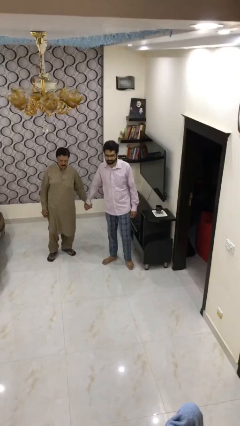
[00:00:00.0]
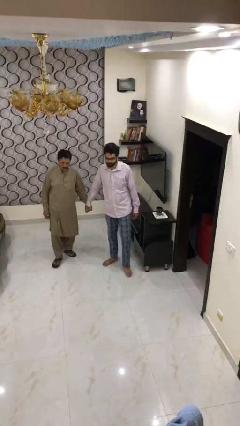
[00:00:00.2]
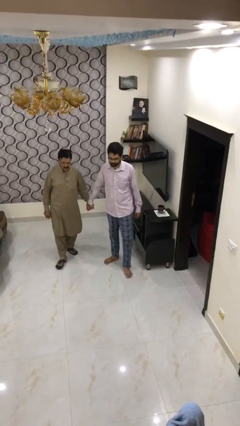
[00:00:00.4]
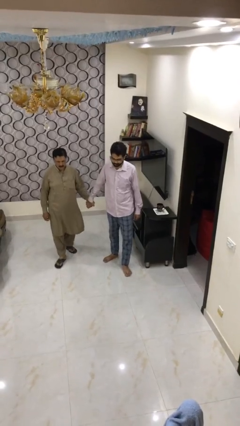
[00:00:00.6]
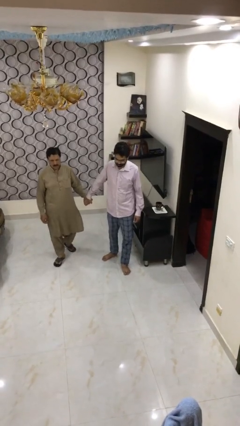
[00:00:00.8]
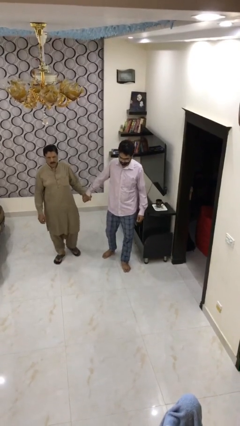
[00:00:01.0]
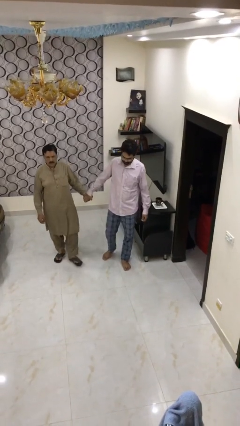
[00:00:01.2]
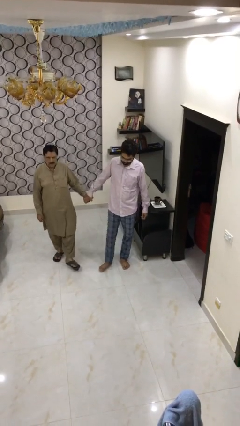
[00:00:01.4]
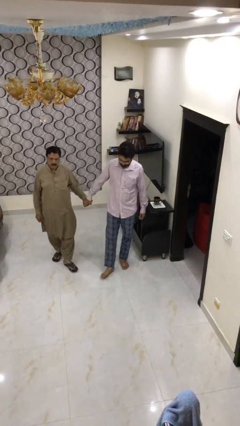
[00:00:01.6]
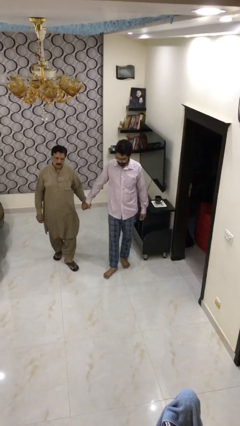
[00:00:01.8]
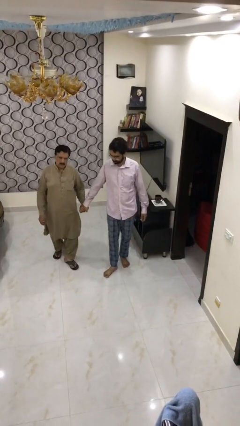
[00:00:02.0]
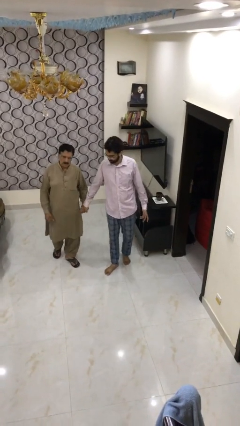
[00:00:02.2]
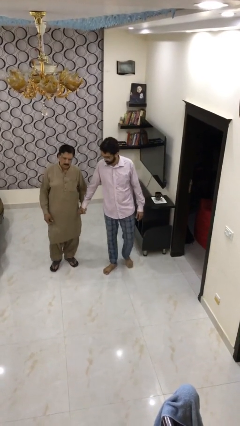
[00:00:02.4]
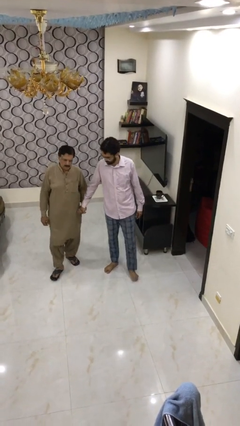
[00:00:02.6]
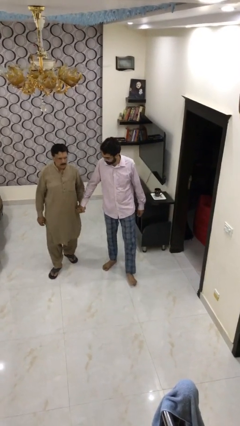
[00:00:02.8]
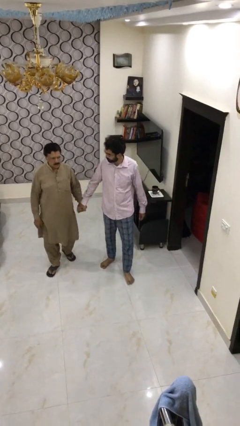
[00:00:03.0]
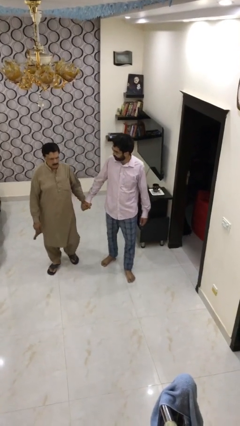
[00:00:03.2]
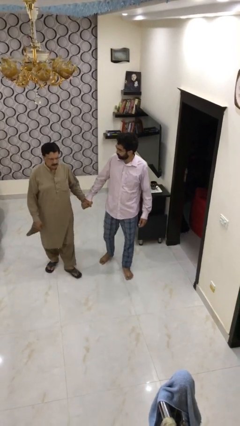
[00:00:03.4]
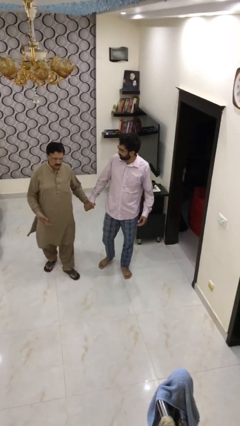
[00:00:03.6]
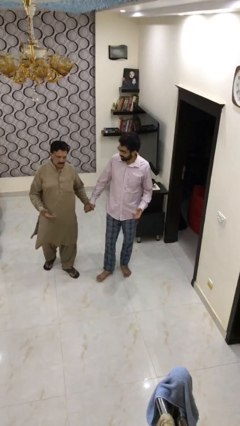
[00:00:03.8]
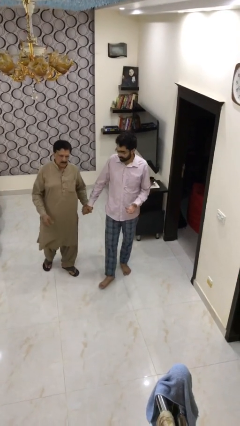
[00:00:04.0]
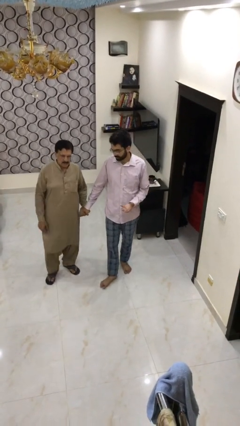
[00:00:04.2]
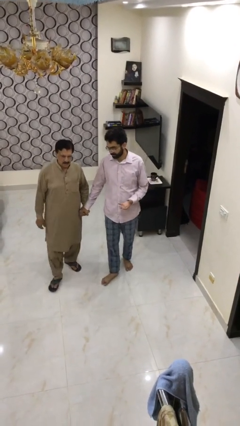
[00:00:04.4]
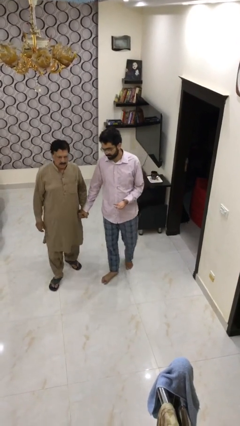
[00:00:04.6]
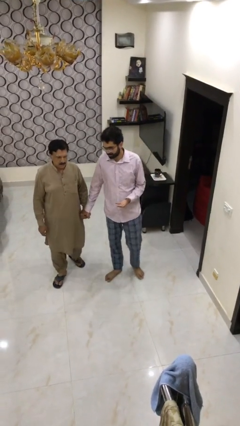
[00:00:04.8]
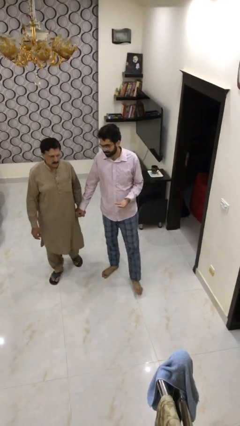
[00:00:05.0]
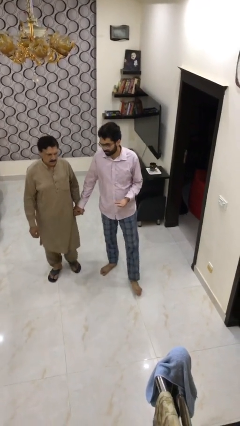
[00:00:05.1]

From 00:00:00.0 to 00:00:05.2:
person holds hand

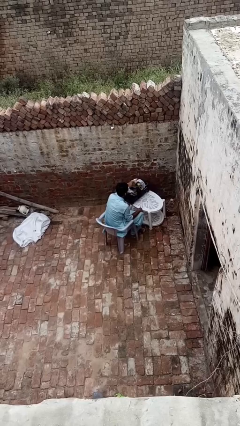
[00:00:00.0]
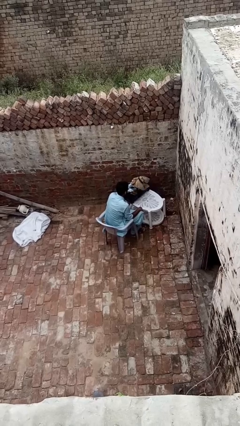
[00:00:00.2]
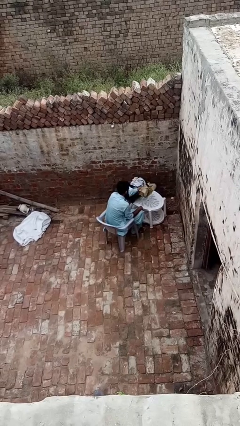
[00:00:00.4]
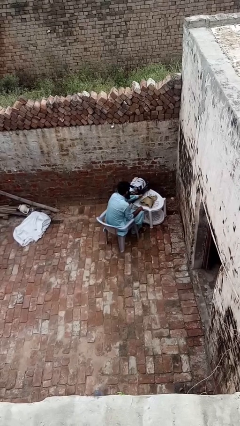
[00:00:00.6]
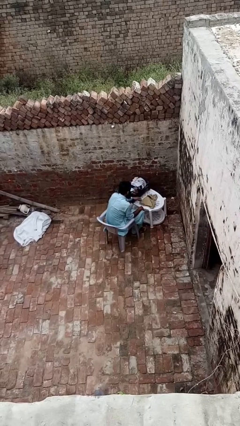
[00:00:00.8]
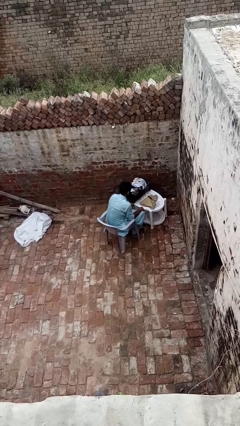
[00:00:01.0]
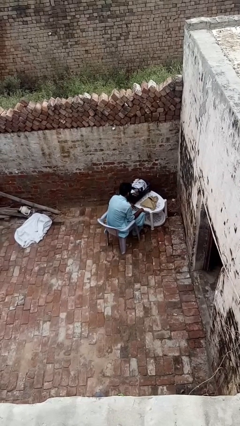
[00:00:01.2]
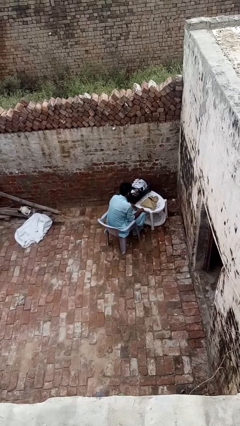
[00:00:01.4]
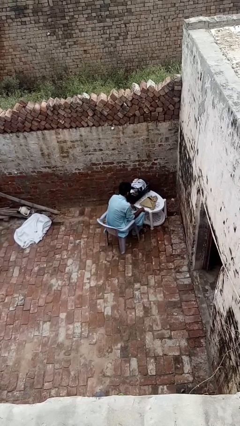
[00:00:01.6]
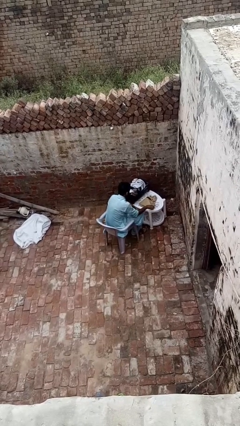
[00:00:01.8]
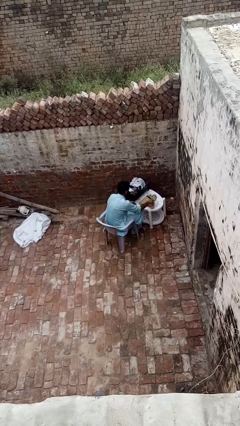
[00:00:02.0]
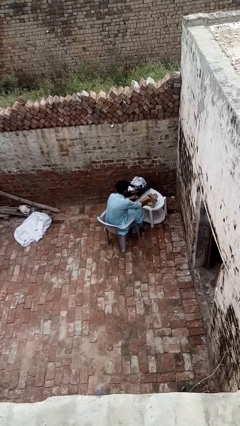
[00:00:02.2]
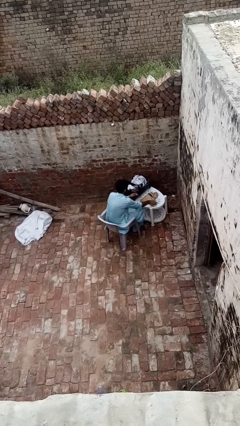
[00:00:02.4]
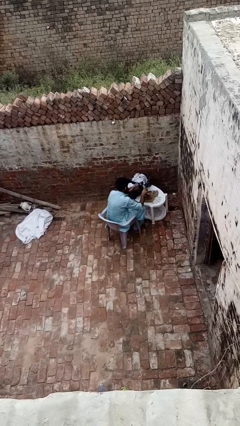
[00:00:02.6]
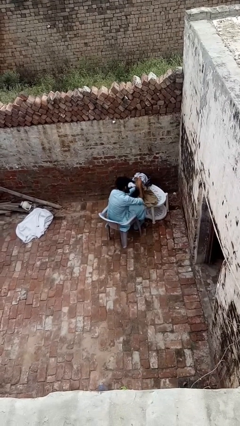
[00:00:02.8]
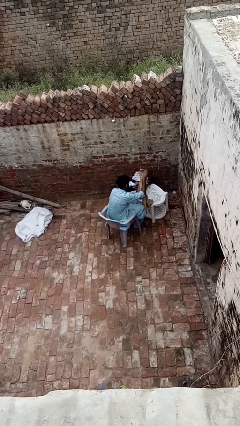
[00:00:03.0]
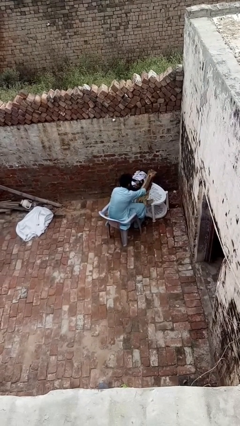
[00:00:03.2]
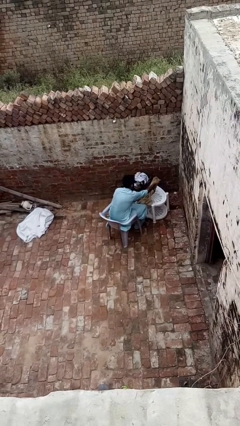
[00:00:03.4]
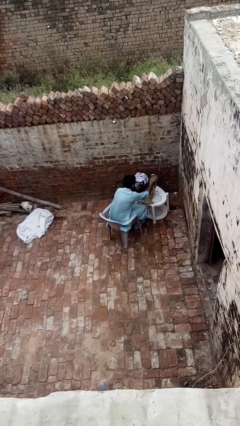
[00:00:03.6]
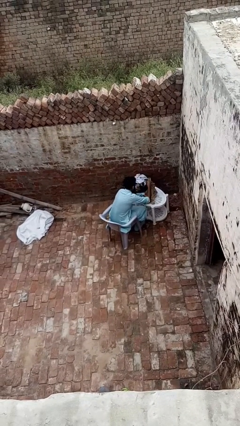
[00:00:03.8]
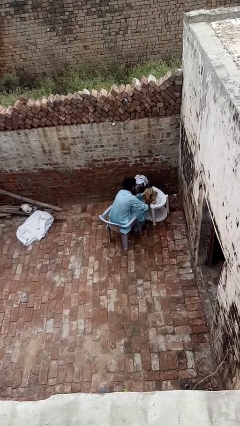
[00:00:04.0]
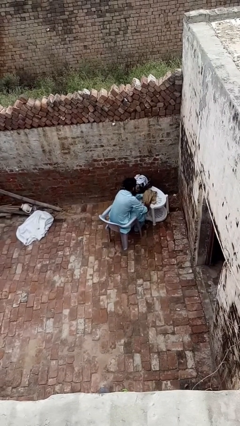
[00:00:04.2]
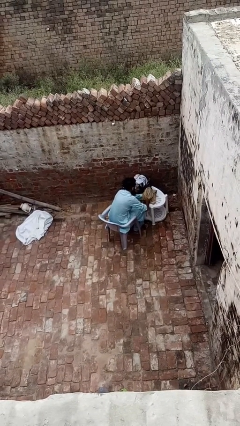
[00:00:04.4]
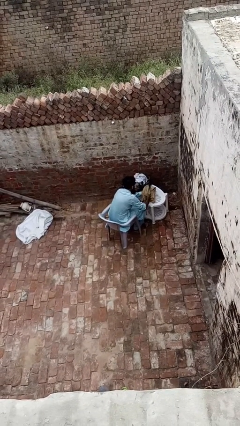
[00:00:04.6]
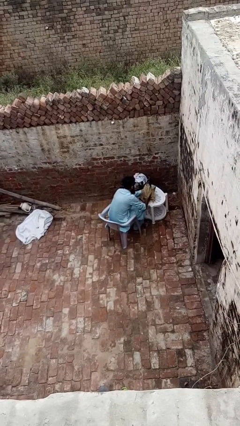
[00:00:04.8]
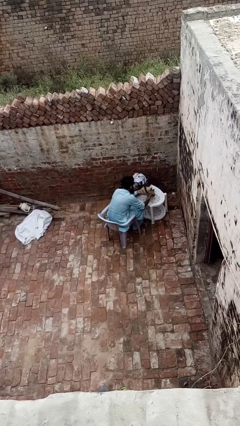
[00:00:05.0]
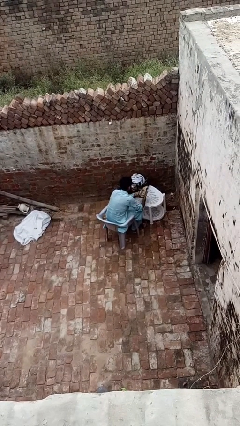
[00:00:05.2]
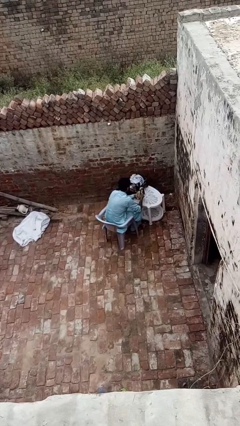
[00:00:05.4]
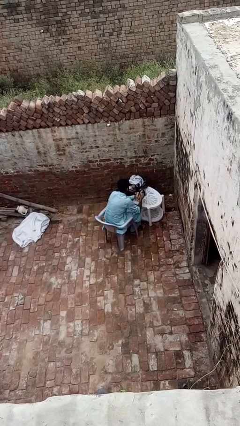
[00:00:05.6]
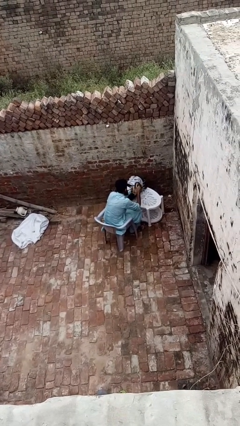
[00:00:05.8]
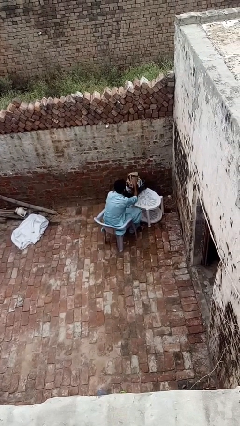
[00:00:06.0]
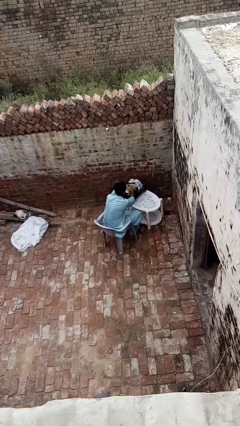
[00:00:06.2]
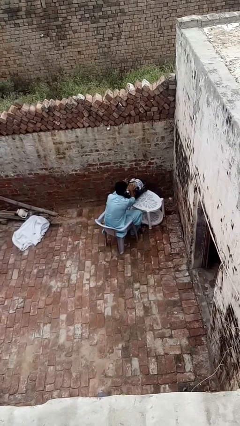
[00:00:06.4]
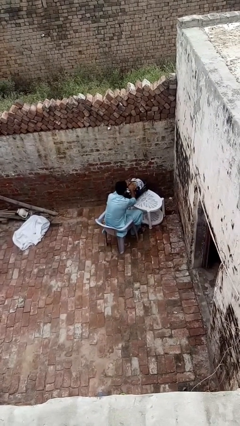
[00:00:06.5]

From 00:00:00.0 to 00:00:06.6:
person folds shirt

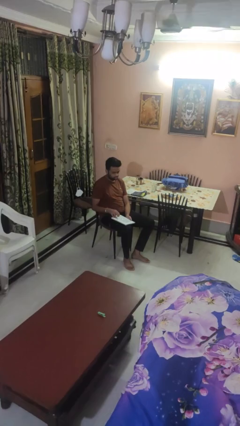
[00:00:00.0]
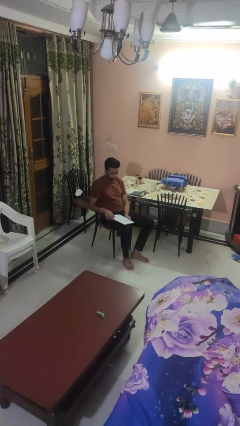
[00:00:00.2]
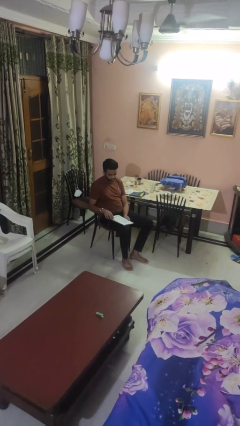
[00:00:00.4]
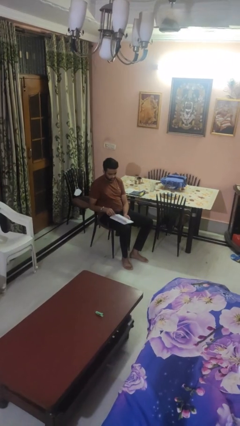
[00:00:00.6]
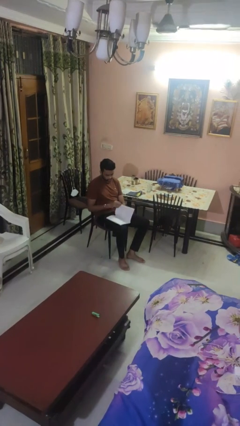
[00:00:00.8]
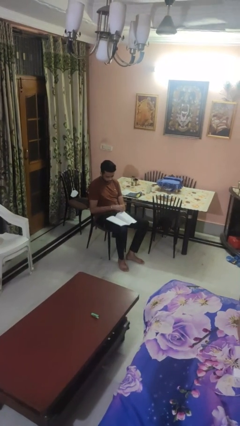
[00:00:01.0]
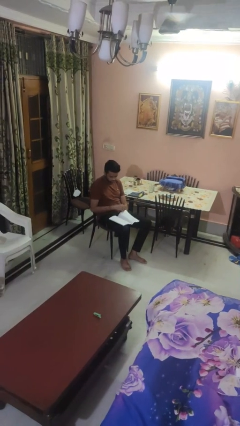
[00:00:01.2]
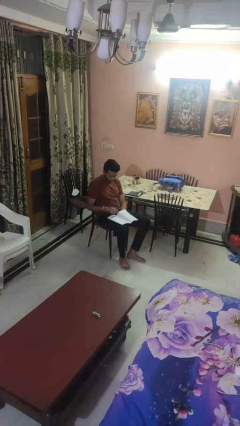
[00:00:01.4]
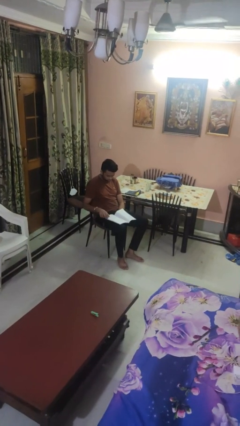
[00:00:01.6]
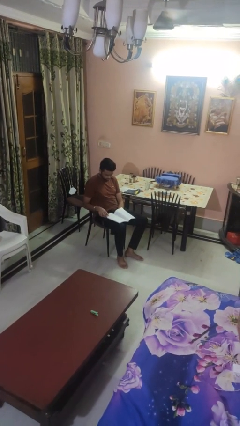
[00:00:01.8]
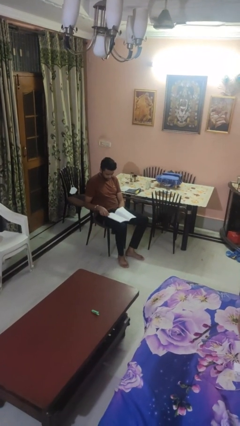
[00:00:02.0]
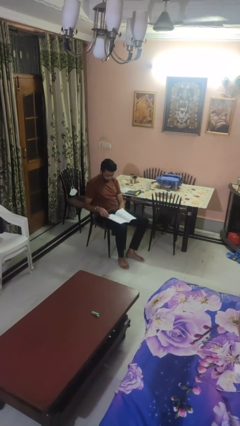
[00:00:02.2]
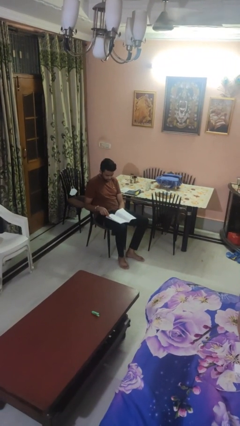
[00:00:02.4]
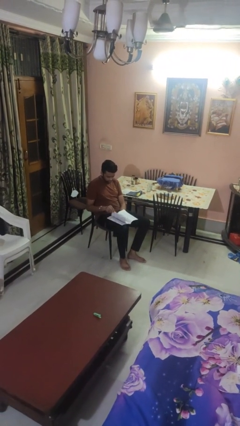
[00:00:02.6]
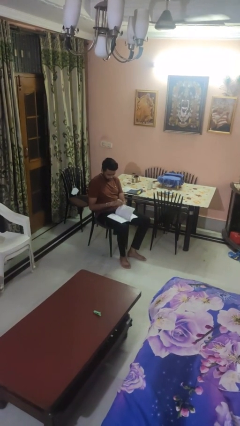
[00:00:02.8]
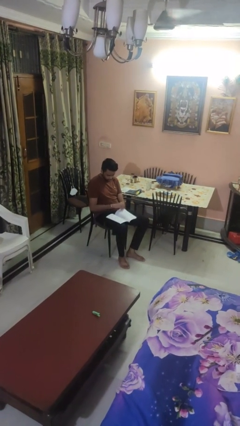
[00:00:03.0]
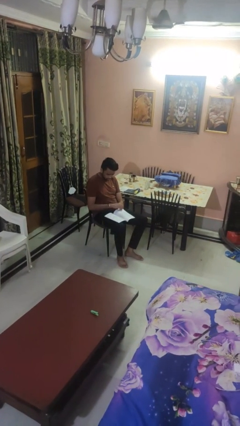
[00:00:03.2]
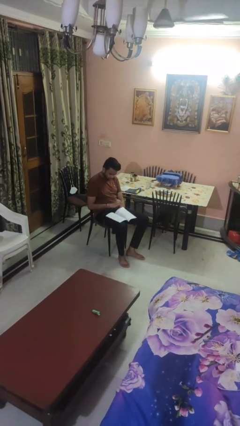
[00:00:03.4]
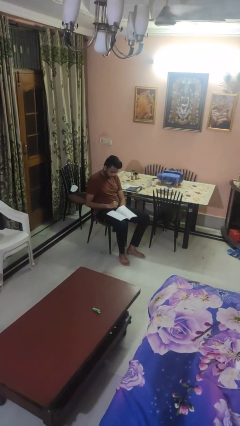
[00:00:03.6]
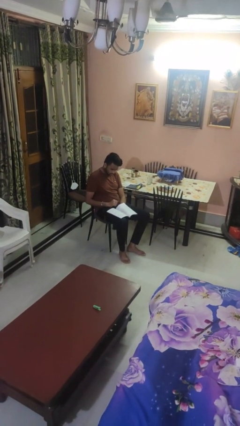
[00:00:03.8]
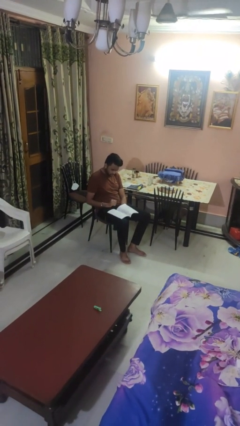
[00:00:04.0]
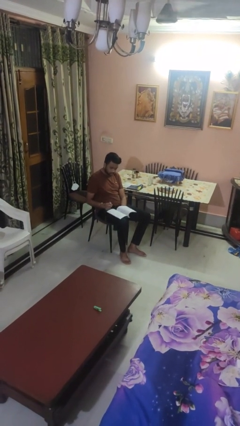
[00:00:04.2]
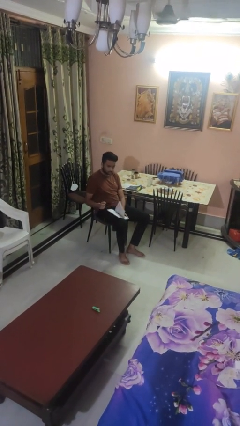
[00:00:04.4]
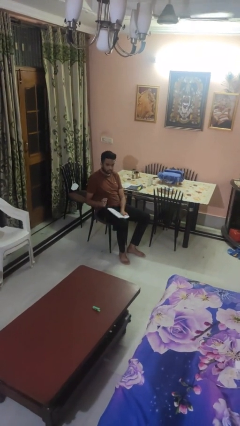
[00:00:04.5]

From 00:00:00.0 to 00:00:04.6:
person reads magazine

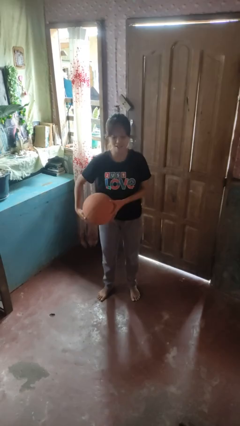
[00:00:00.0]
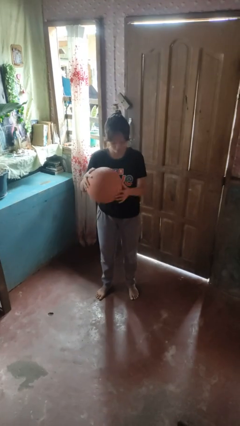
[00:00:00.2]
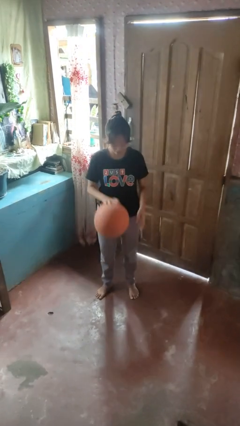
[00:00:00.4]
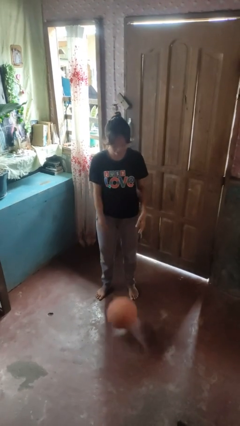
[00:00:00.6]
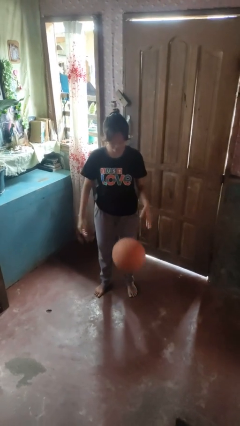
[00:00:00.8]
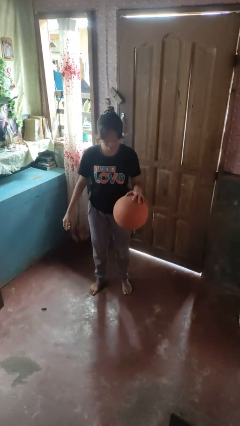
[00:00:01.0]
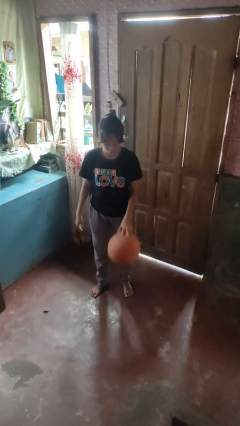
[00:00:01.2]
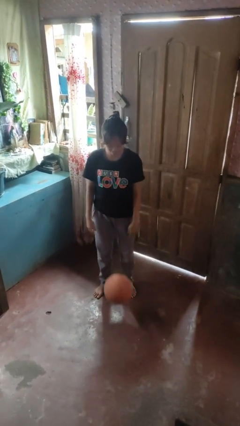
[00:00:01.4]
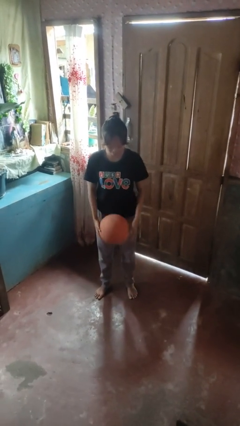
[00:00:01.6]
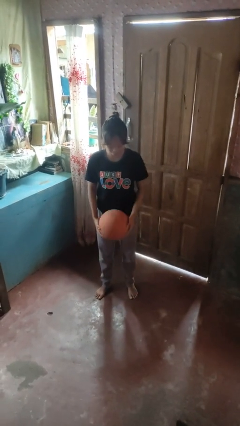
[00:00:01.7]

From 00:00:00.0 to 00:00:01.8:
person bounces ball on floor
